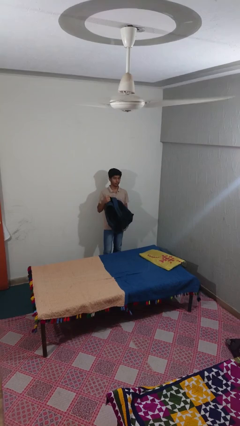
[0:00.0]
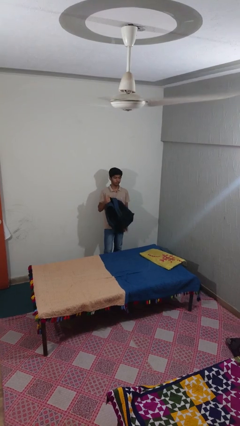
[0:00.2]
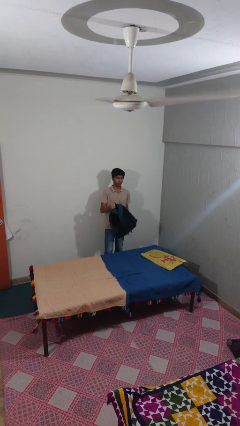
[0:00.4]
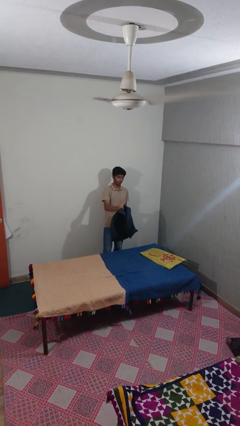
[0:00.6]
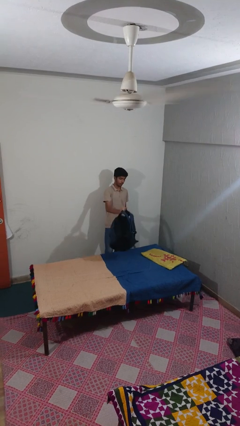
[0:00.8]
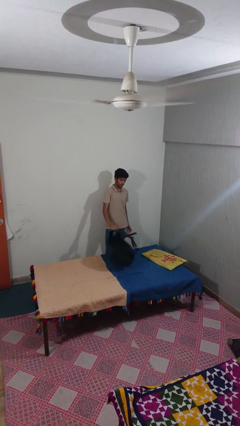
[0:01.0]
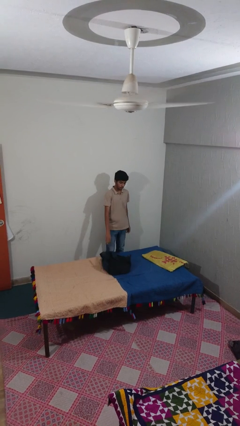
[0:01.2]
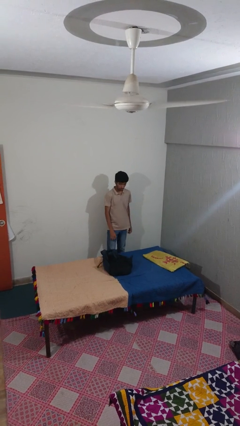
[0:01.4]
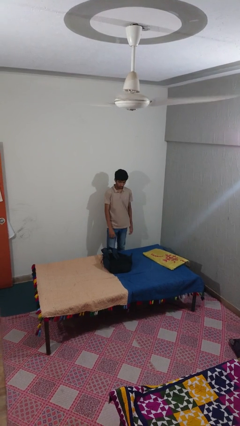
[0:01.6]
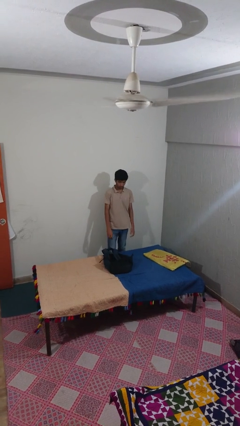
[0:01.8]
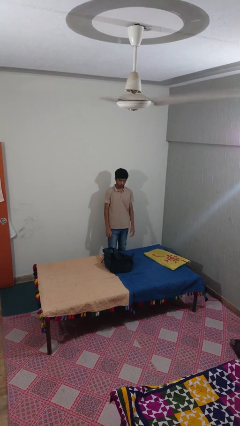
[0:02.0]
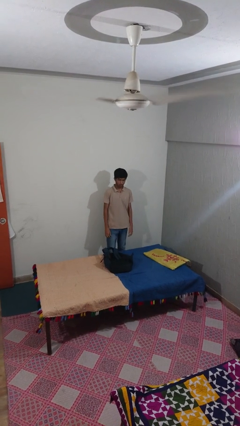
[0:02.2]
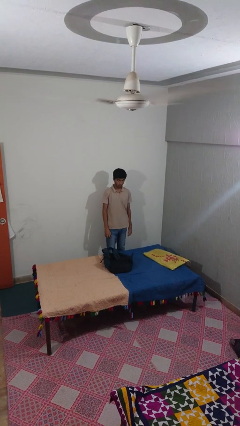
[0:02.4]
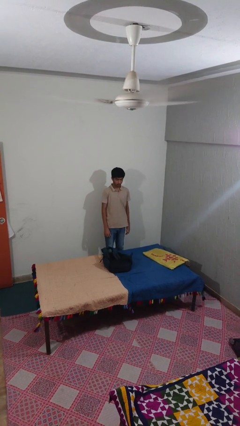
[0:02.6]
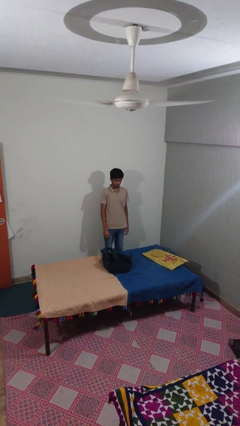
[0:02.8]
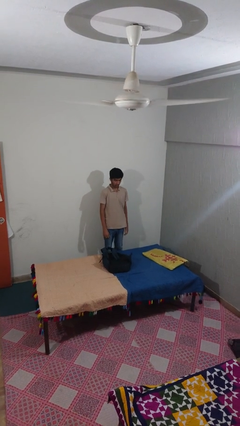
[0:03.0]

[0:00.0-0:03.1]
person puts down object on bed

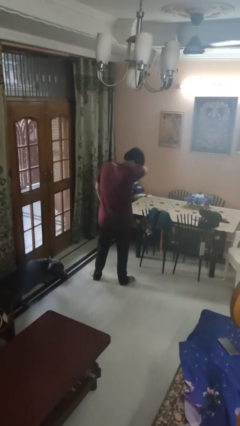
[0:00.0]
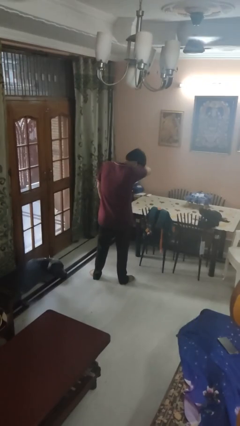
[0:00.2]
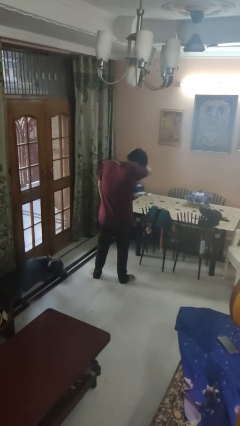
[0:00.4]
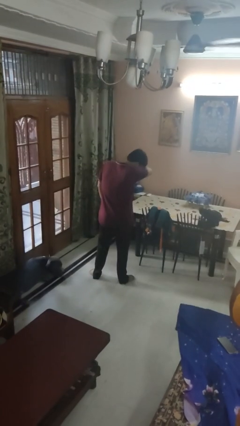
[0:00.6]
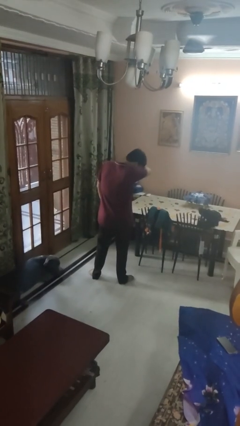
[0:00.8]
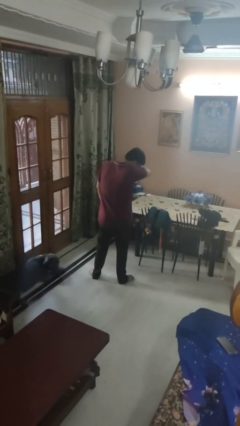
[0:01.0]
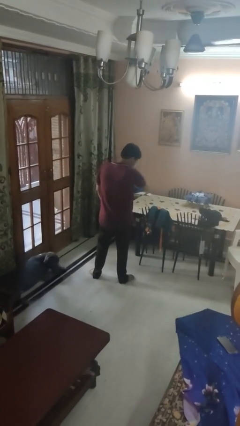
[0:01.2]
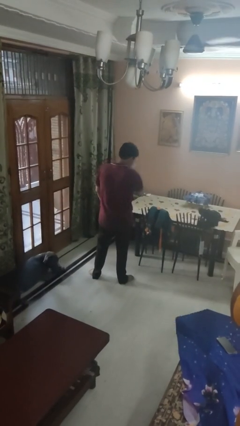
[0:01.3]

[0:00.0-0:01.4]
person sneezes into arm

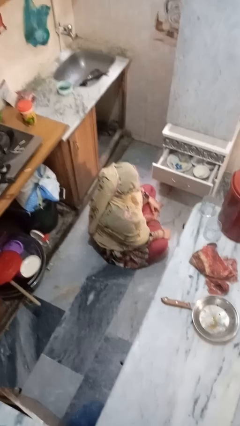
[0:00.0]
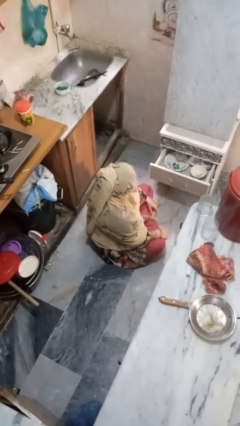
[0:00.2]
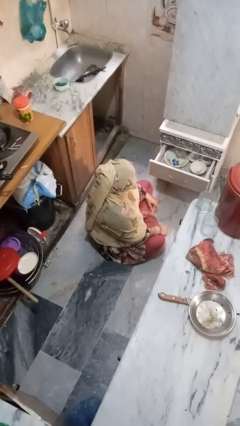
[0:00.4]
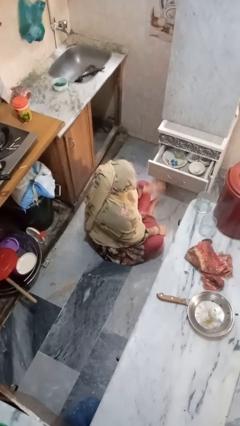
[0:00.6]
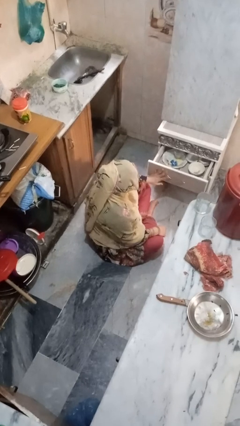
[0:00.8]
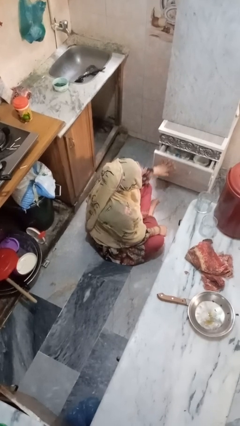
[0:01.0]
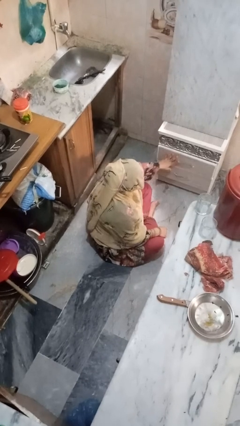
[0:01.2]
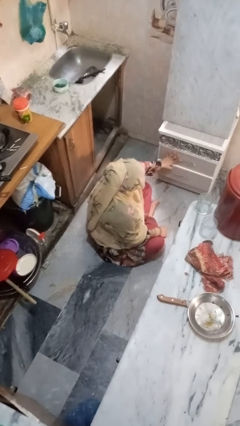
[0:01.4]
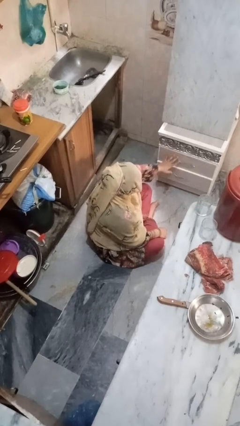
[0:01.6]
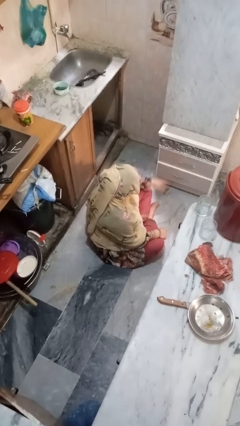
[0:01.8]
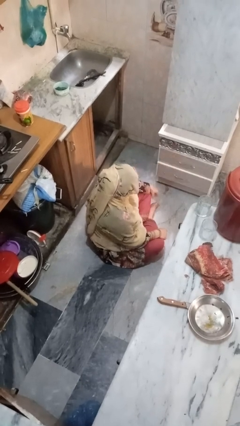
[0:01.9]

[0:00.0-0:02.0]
person closes kitchen drawer

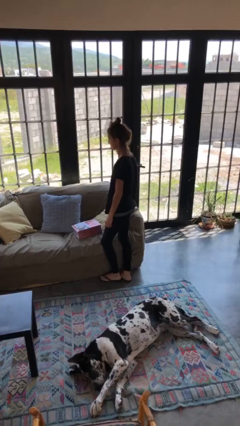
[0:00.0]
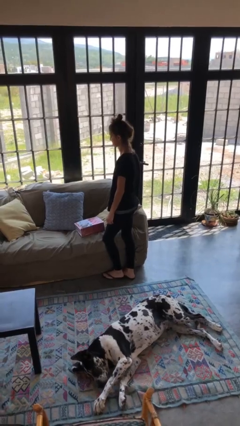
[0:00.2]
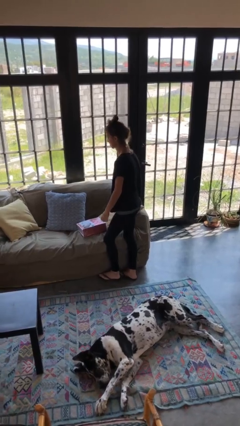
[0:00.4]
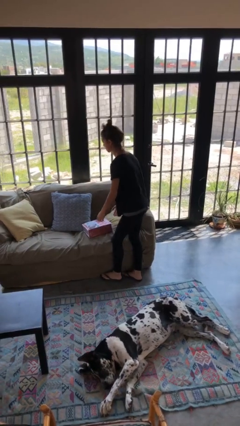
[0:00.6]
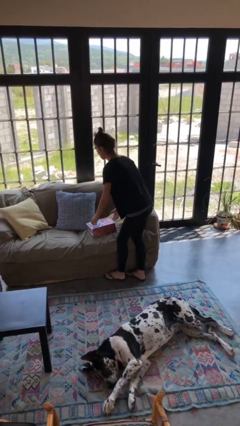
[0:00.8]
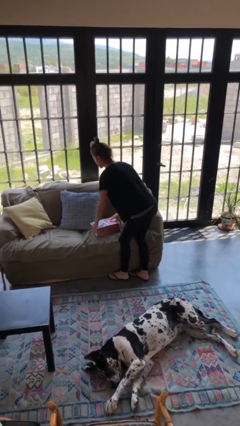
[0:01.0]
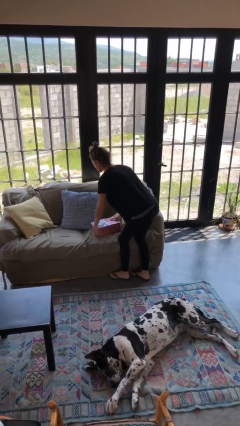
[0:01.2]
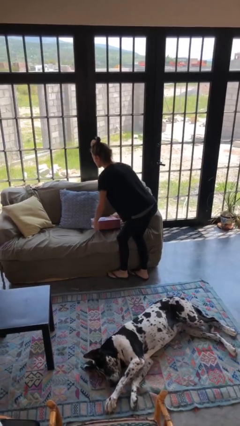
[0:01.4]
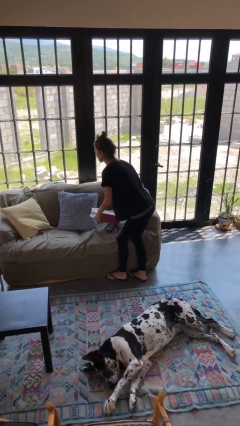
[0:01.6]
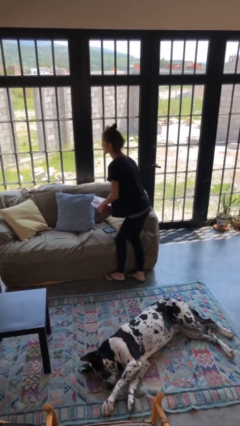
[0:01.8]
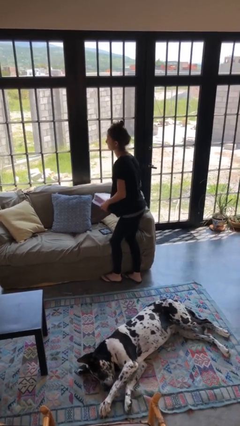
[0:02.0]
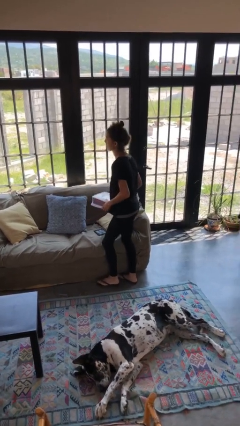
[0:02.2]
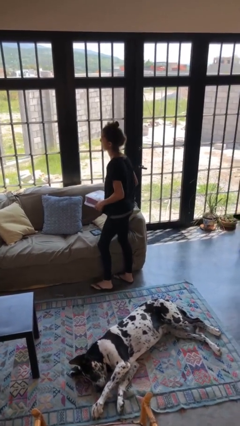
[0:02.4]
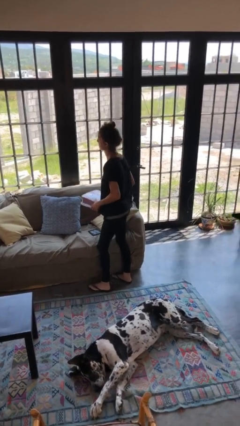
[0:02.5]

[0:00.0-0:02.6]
person picks up object from couch

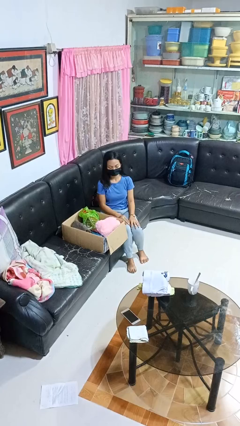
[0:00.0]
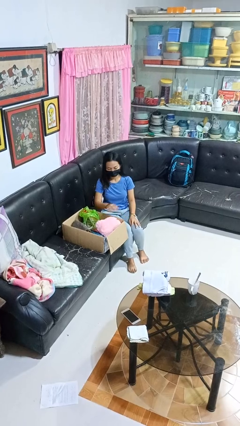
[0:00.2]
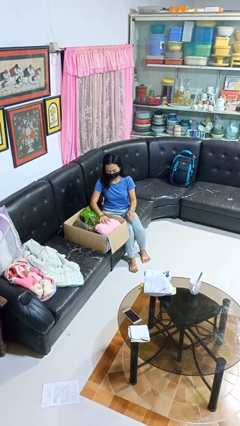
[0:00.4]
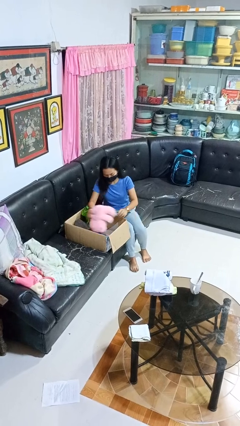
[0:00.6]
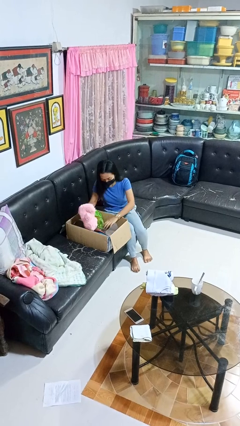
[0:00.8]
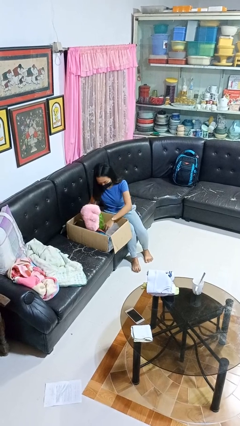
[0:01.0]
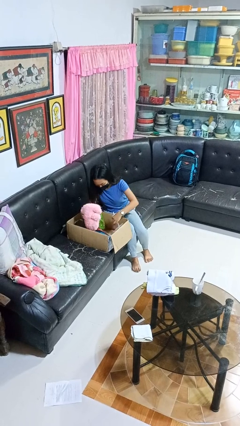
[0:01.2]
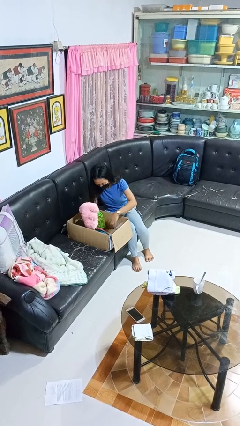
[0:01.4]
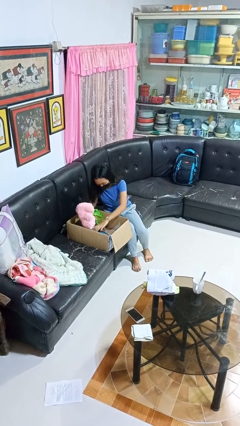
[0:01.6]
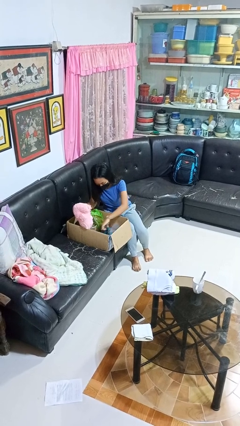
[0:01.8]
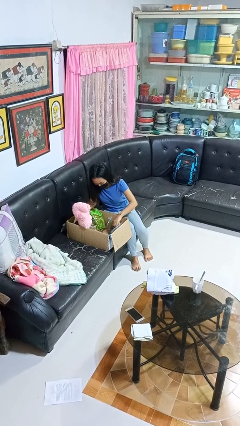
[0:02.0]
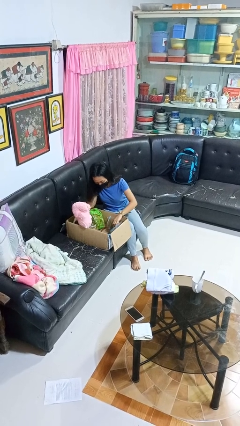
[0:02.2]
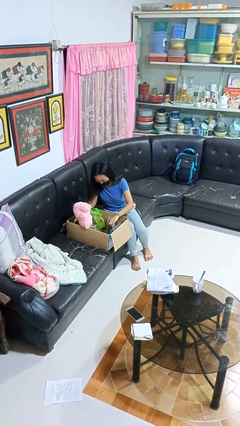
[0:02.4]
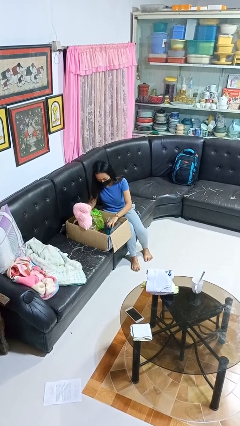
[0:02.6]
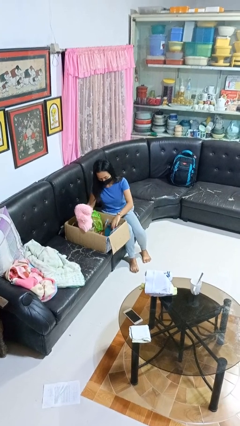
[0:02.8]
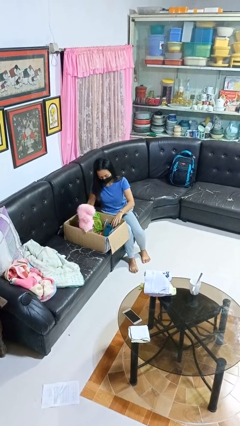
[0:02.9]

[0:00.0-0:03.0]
person searches in box

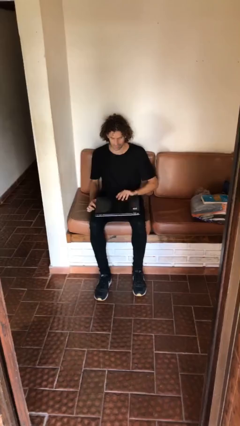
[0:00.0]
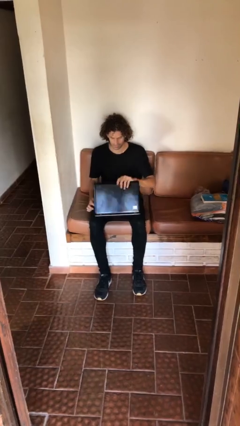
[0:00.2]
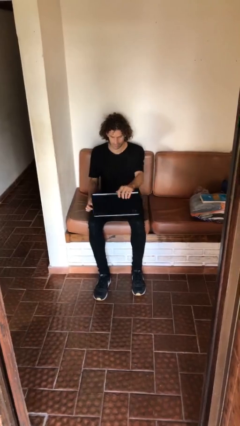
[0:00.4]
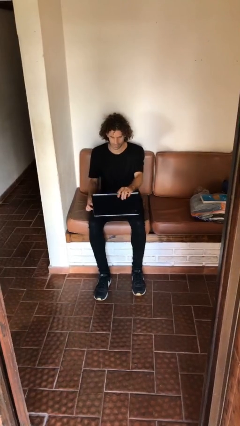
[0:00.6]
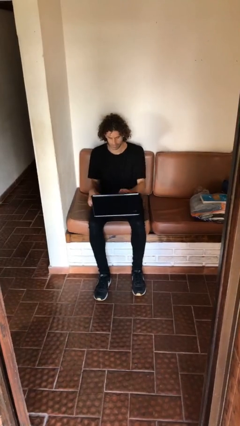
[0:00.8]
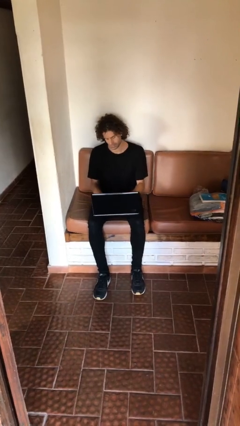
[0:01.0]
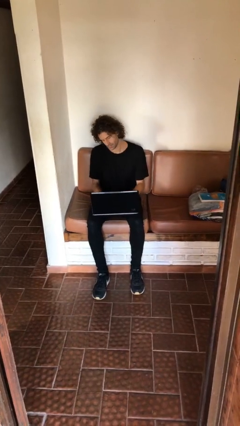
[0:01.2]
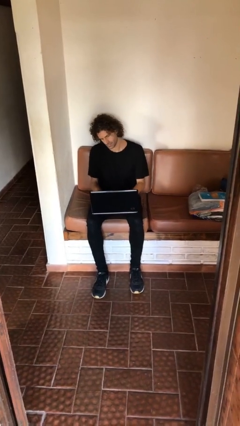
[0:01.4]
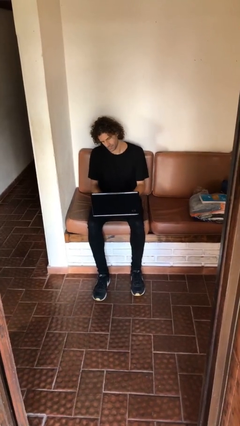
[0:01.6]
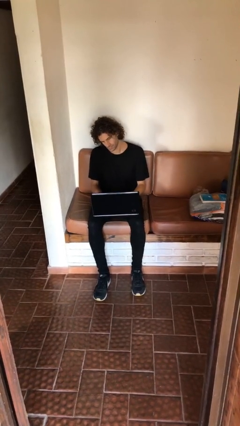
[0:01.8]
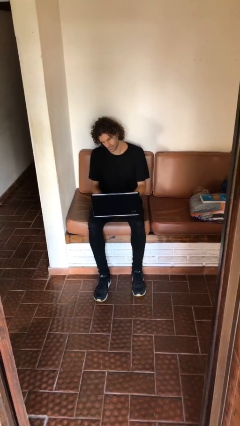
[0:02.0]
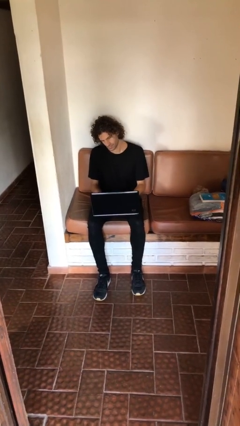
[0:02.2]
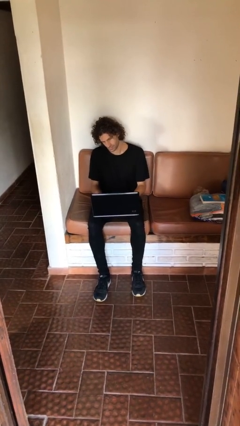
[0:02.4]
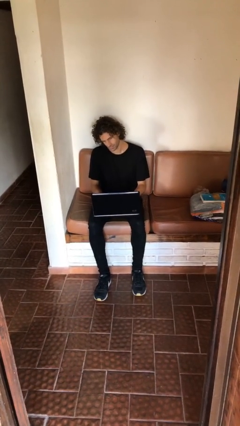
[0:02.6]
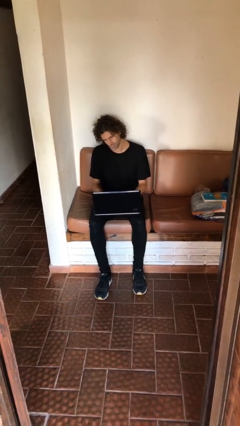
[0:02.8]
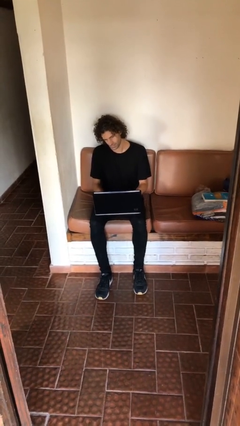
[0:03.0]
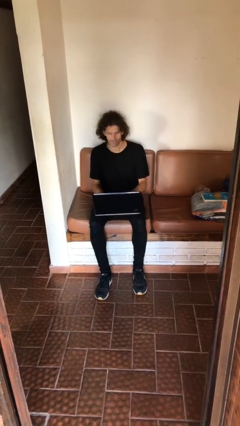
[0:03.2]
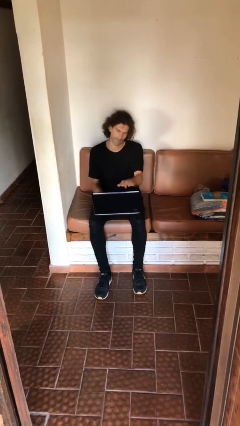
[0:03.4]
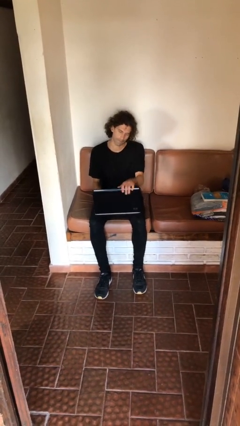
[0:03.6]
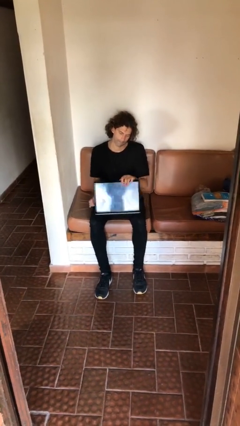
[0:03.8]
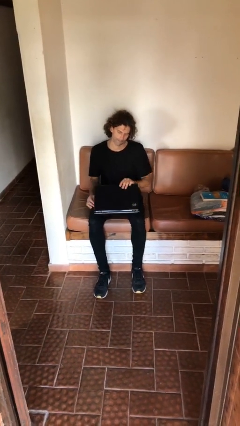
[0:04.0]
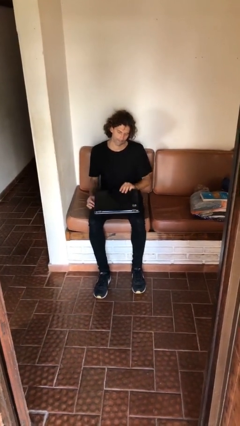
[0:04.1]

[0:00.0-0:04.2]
person interacts with laptop

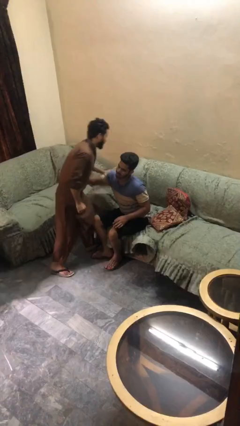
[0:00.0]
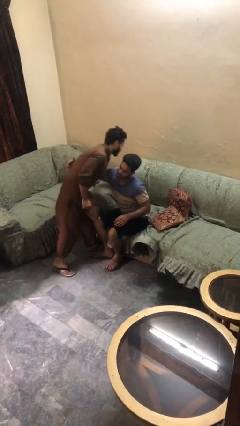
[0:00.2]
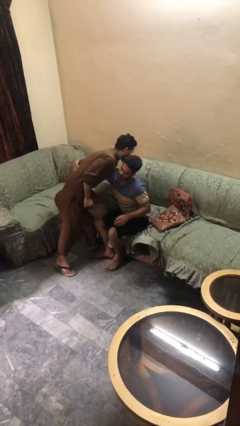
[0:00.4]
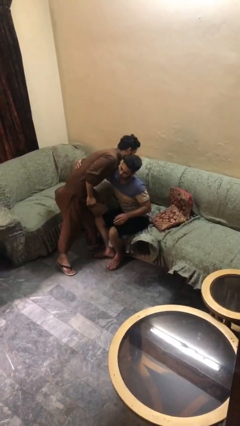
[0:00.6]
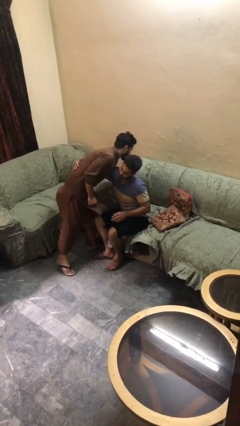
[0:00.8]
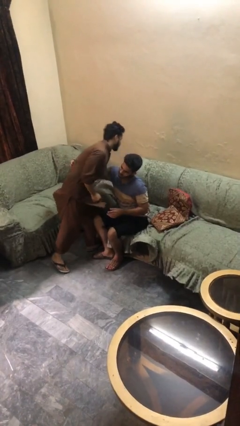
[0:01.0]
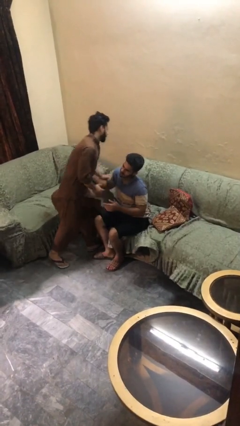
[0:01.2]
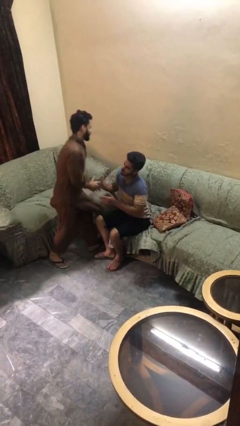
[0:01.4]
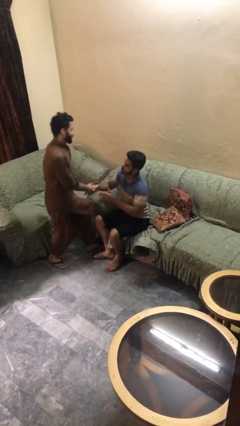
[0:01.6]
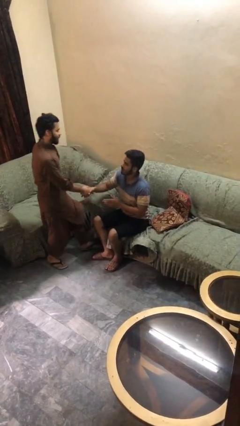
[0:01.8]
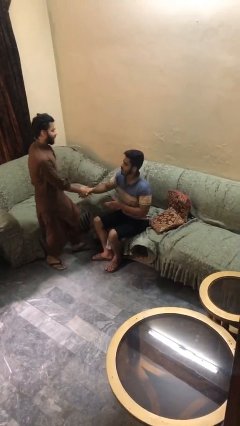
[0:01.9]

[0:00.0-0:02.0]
person embraces person
